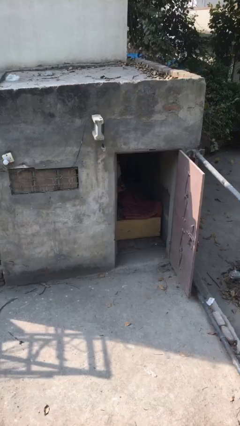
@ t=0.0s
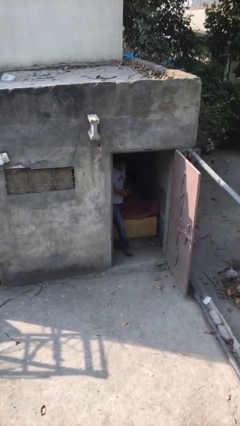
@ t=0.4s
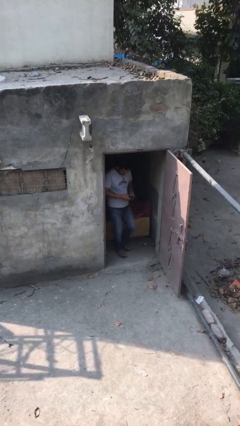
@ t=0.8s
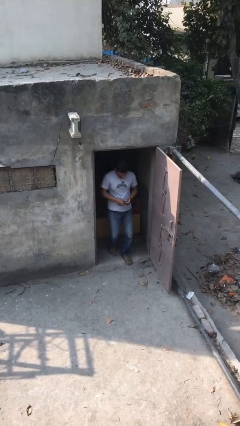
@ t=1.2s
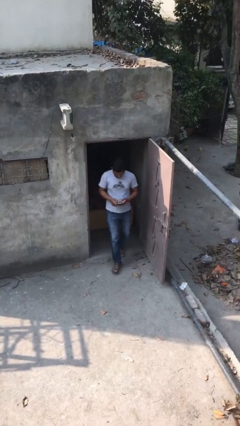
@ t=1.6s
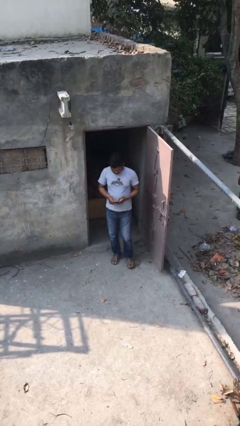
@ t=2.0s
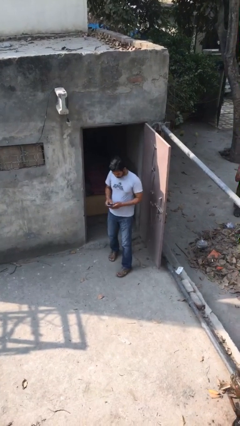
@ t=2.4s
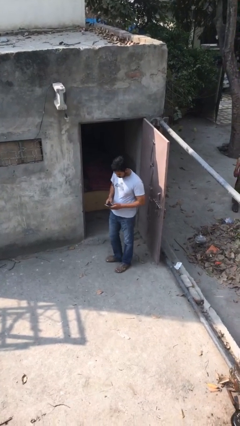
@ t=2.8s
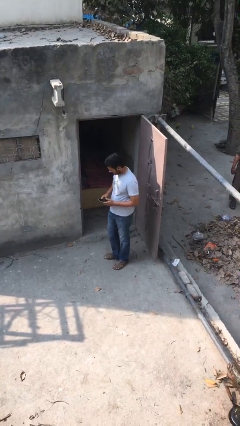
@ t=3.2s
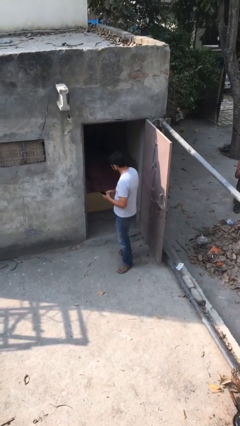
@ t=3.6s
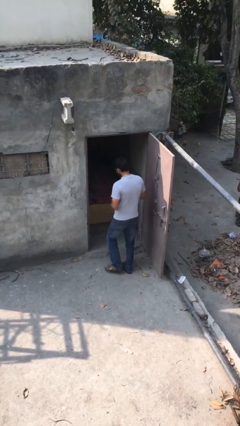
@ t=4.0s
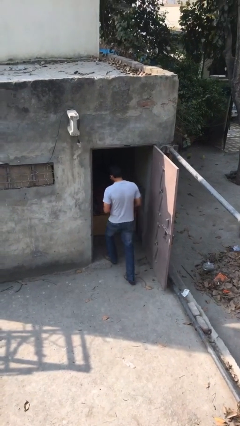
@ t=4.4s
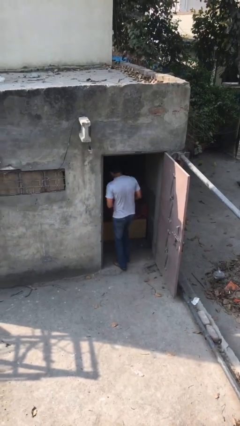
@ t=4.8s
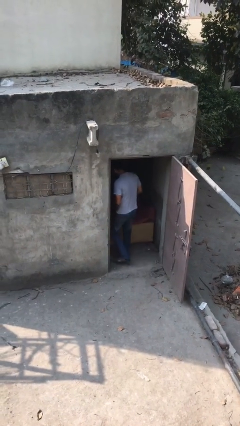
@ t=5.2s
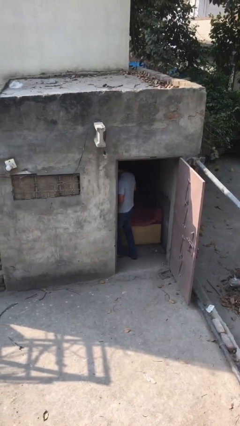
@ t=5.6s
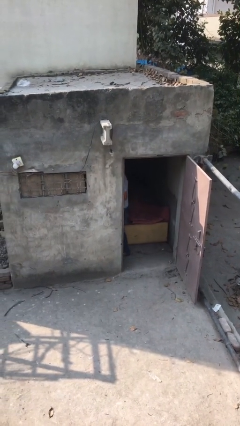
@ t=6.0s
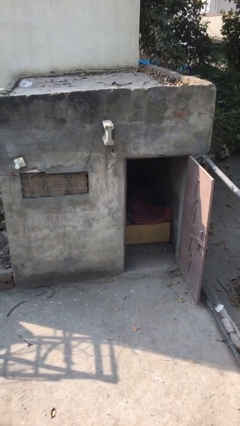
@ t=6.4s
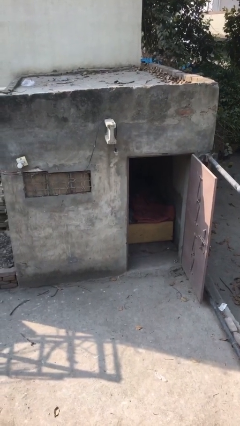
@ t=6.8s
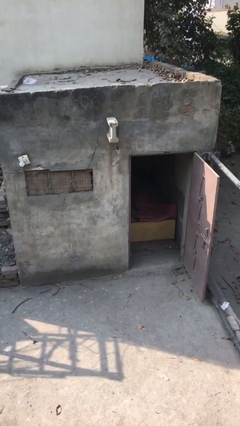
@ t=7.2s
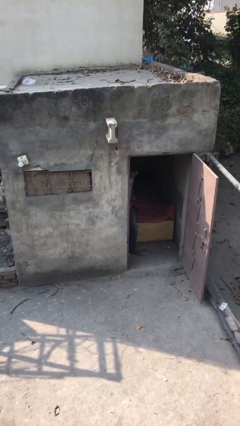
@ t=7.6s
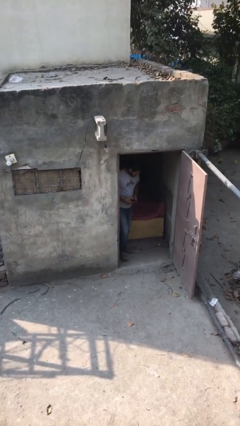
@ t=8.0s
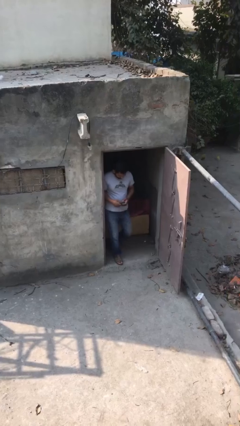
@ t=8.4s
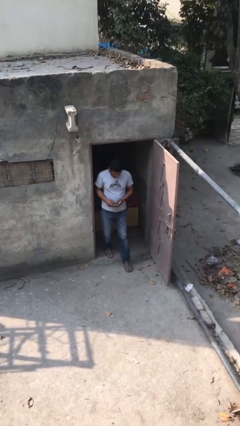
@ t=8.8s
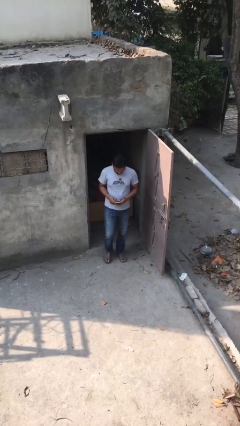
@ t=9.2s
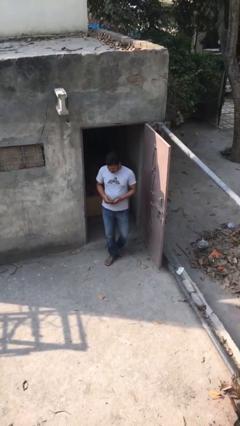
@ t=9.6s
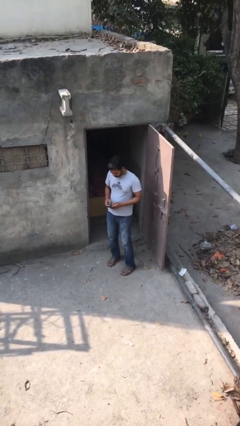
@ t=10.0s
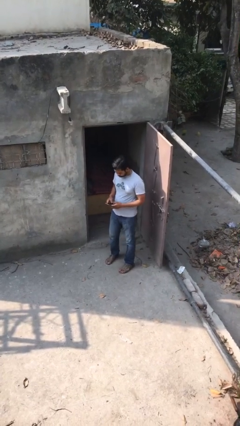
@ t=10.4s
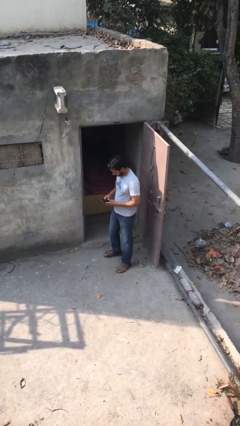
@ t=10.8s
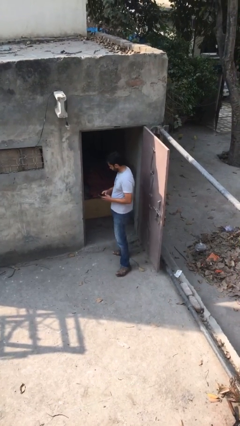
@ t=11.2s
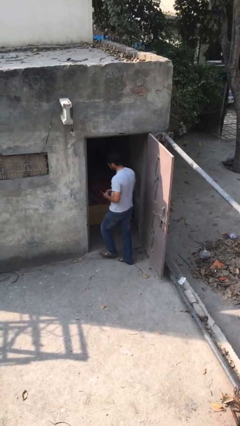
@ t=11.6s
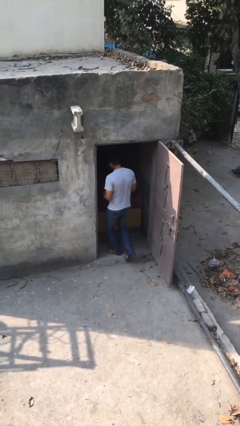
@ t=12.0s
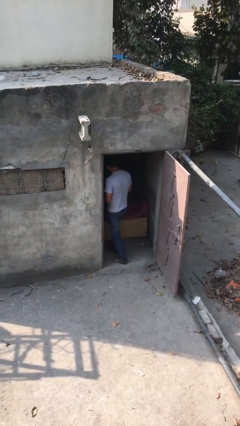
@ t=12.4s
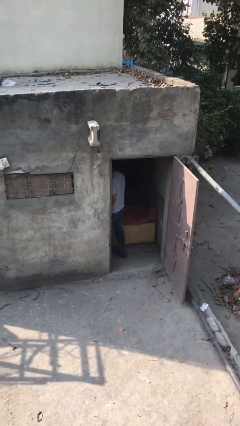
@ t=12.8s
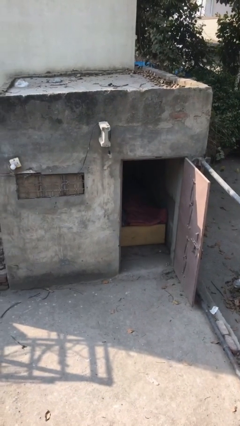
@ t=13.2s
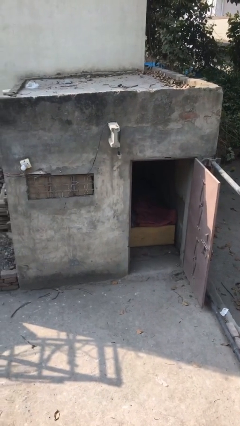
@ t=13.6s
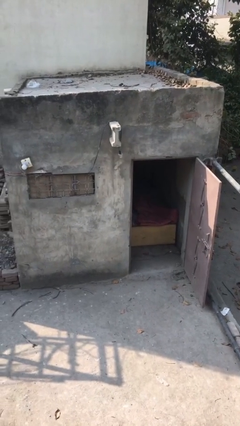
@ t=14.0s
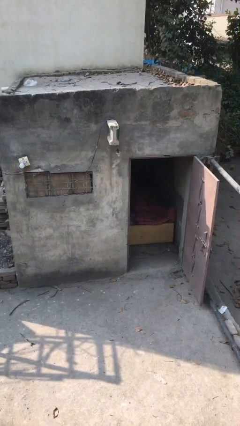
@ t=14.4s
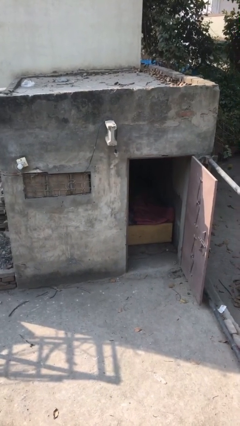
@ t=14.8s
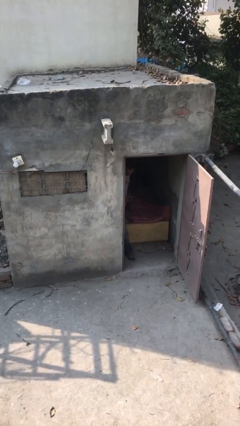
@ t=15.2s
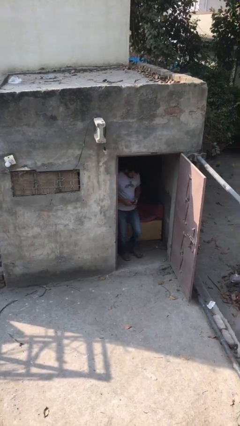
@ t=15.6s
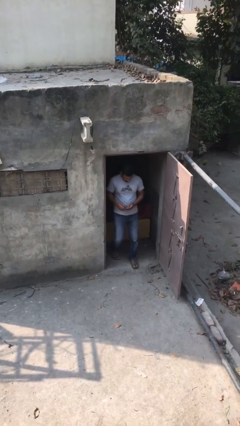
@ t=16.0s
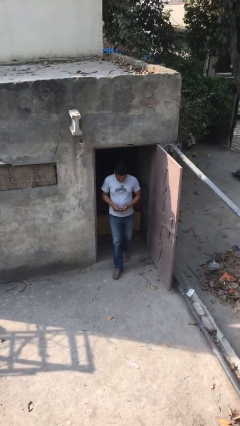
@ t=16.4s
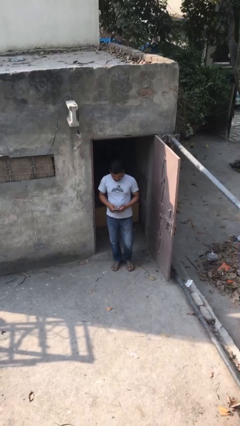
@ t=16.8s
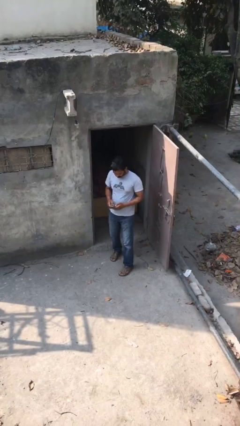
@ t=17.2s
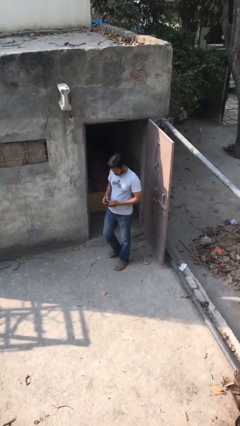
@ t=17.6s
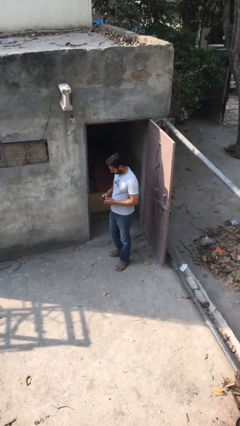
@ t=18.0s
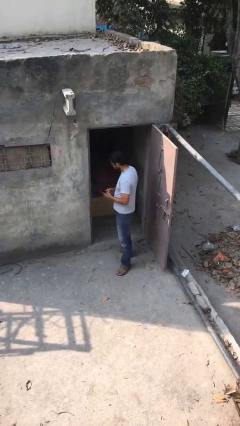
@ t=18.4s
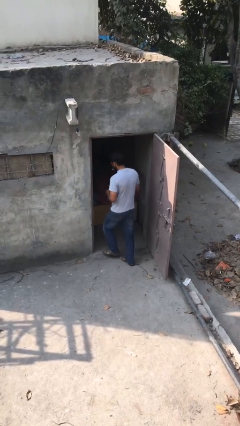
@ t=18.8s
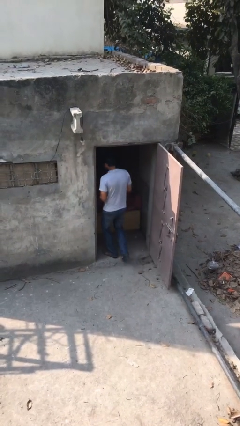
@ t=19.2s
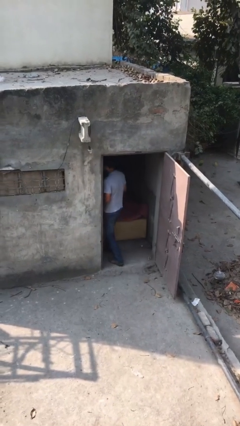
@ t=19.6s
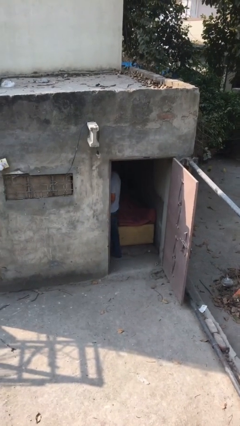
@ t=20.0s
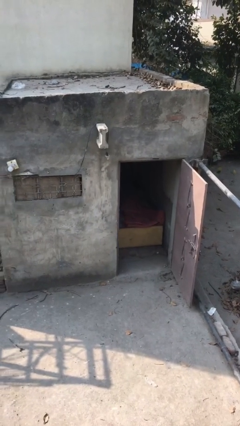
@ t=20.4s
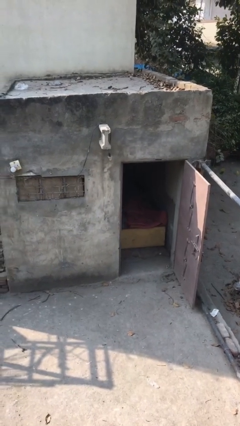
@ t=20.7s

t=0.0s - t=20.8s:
person texts on phone

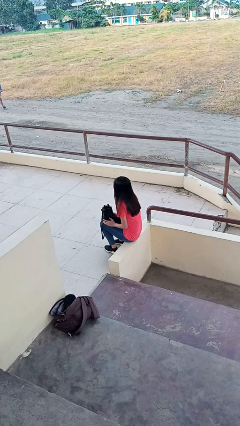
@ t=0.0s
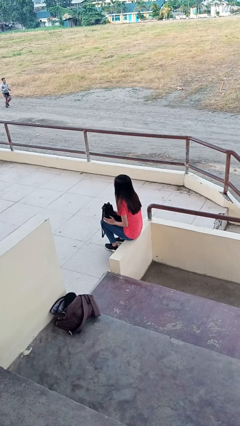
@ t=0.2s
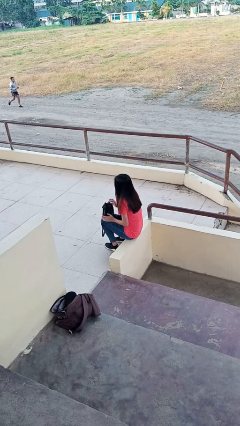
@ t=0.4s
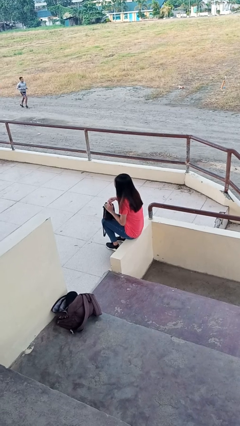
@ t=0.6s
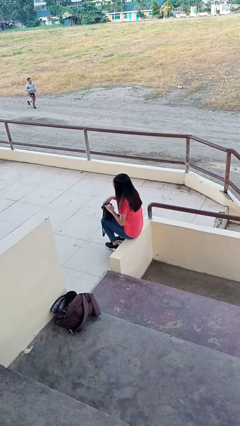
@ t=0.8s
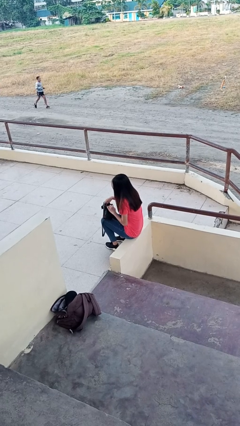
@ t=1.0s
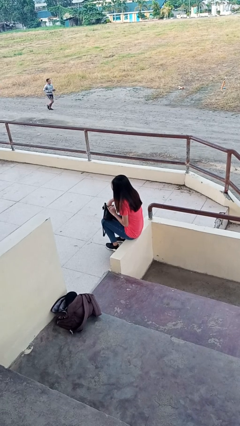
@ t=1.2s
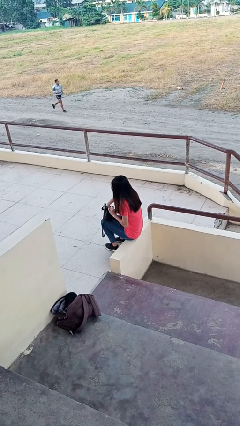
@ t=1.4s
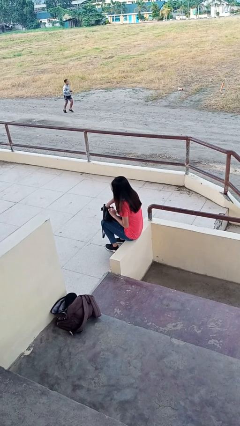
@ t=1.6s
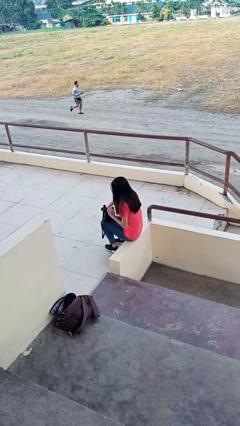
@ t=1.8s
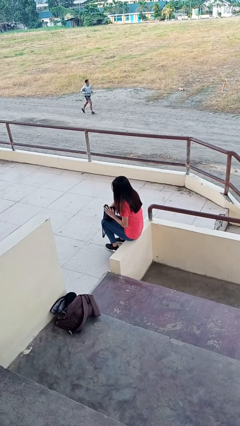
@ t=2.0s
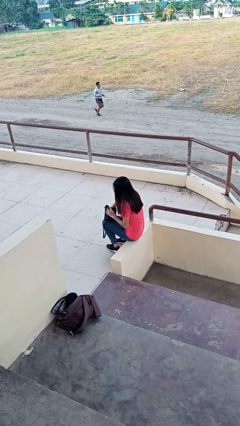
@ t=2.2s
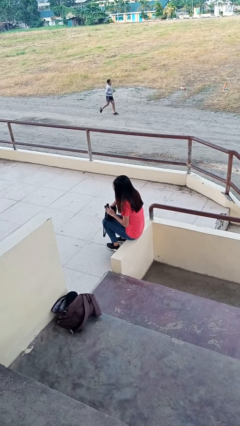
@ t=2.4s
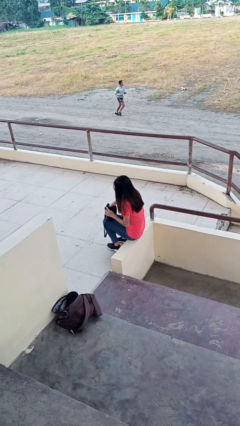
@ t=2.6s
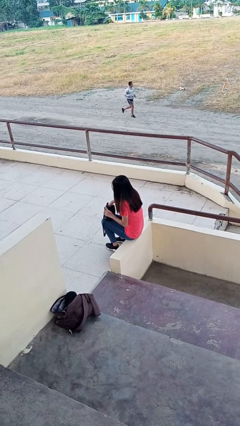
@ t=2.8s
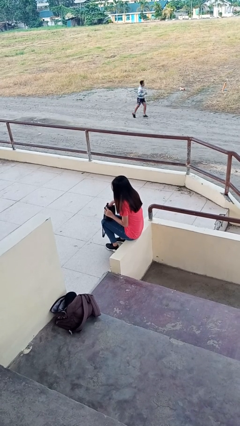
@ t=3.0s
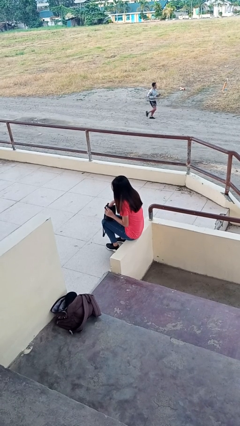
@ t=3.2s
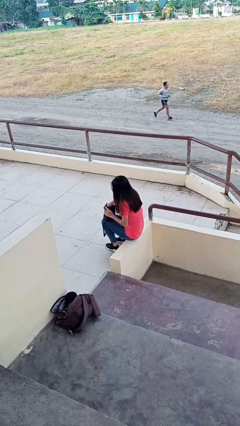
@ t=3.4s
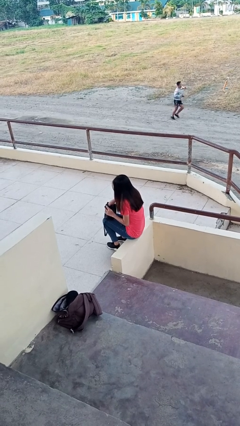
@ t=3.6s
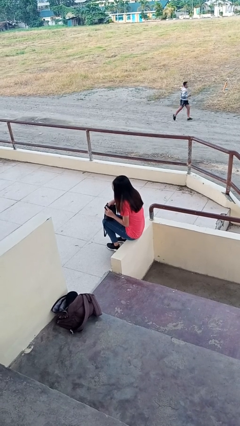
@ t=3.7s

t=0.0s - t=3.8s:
person searches in purse

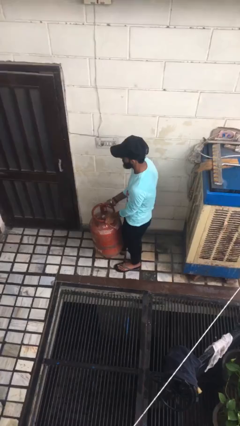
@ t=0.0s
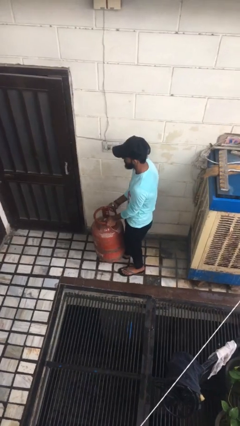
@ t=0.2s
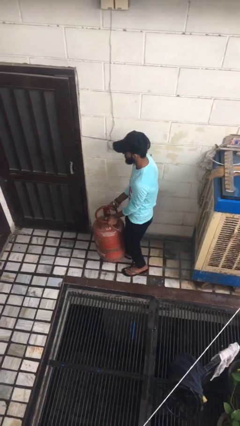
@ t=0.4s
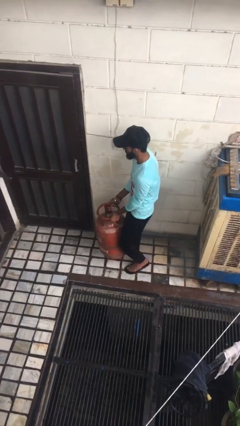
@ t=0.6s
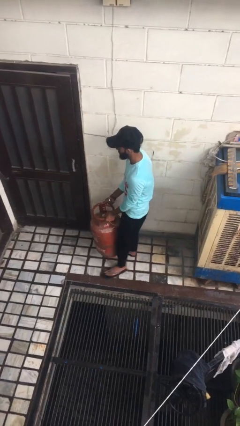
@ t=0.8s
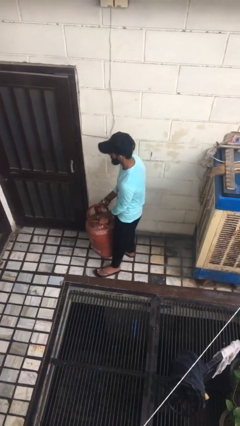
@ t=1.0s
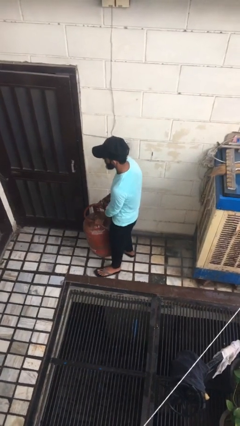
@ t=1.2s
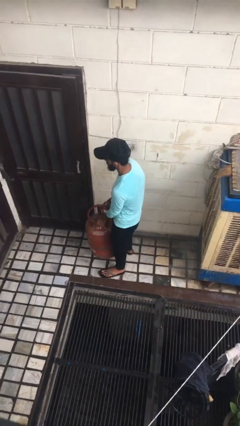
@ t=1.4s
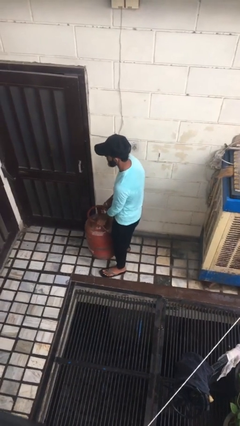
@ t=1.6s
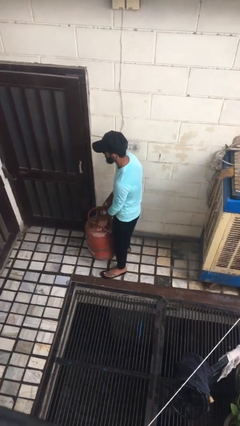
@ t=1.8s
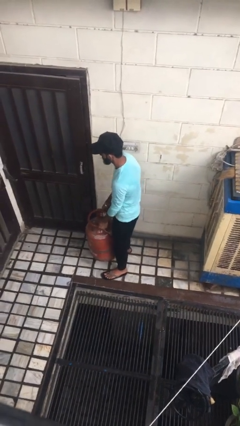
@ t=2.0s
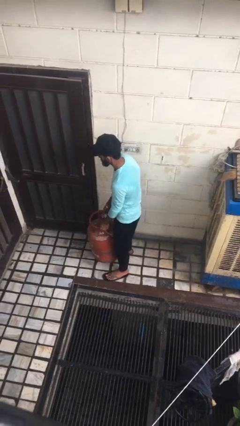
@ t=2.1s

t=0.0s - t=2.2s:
person carries heavy object

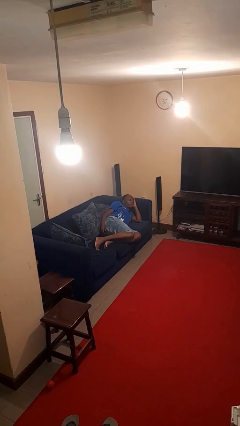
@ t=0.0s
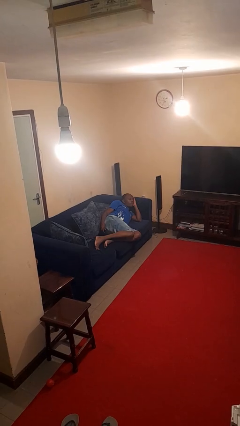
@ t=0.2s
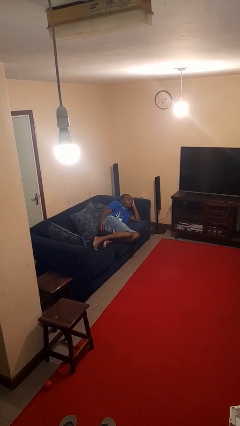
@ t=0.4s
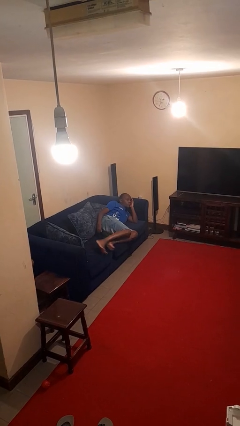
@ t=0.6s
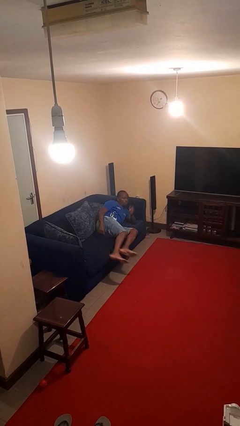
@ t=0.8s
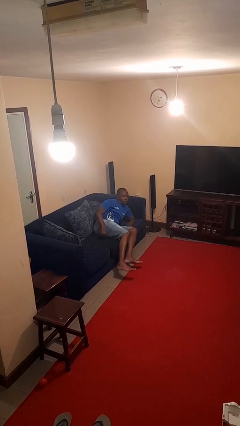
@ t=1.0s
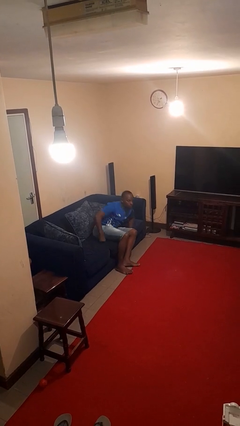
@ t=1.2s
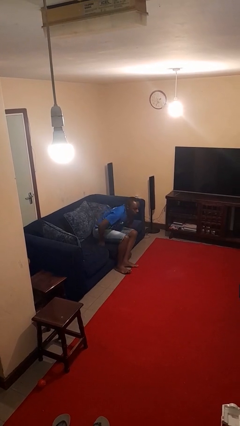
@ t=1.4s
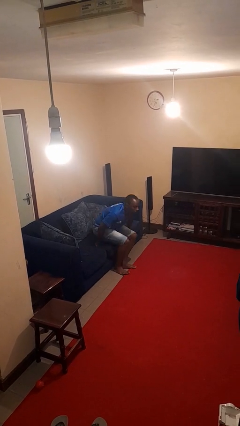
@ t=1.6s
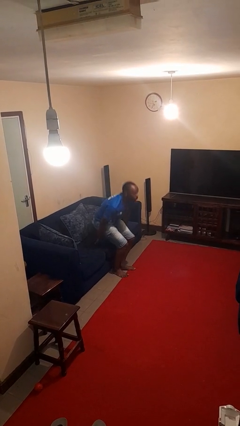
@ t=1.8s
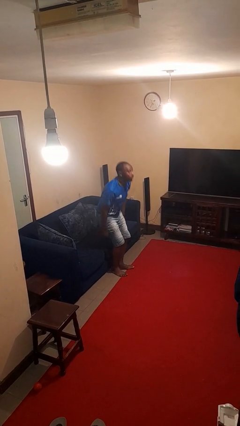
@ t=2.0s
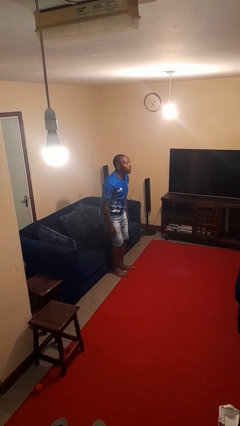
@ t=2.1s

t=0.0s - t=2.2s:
person stands up
